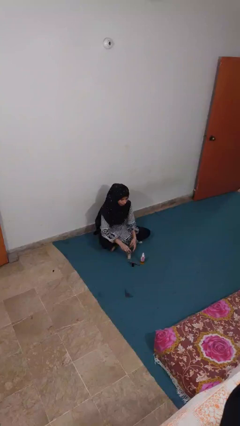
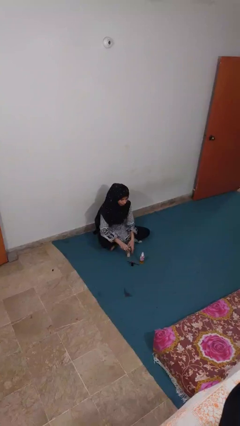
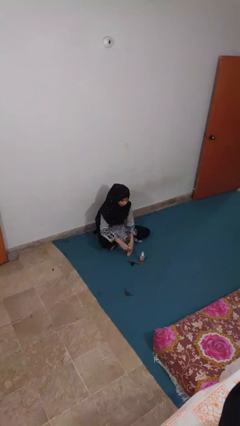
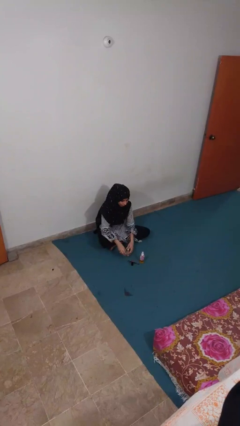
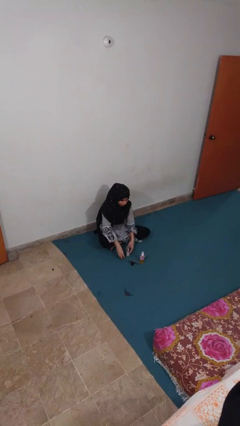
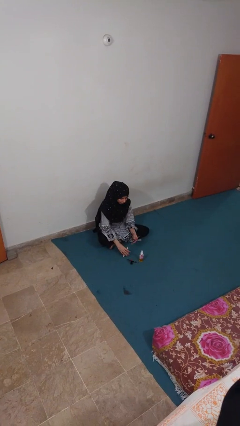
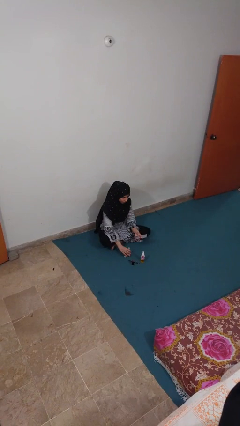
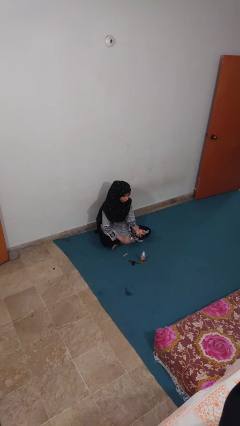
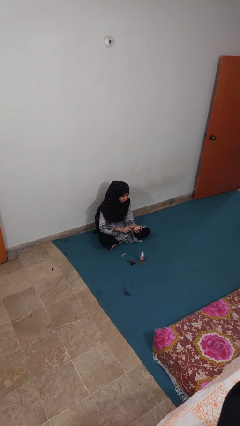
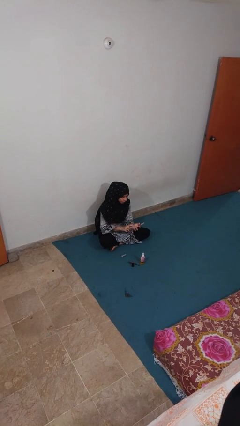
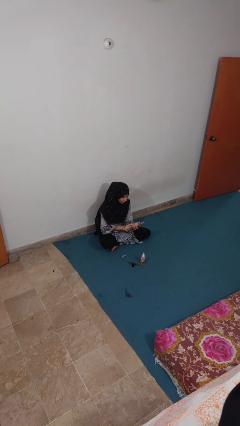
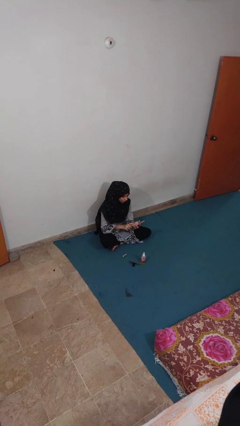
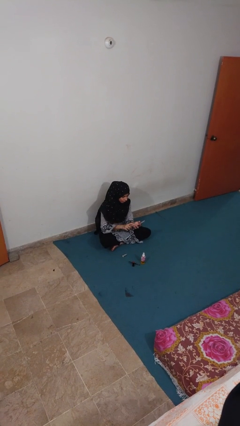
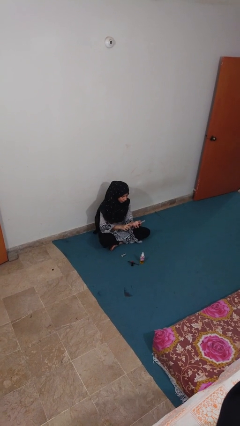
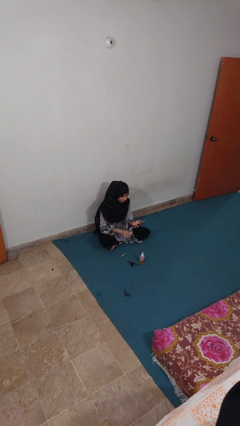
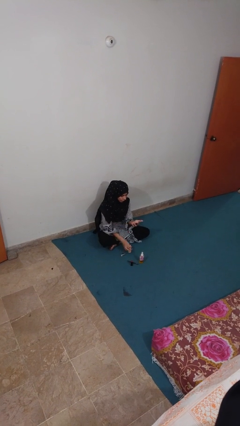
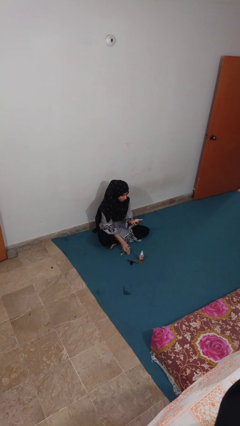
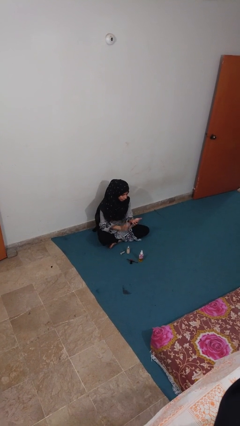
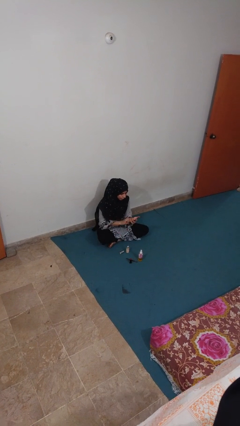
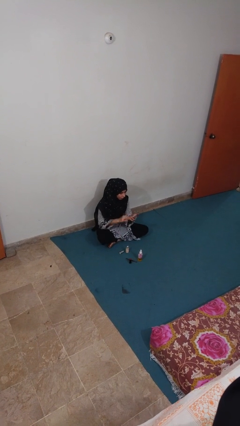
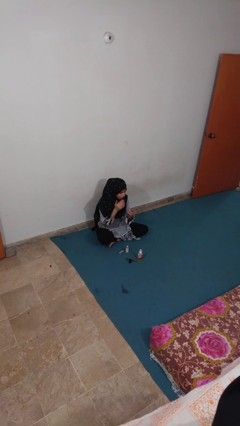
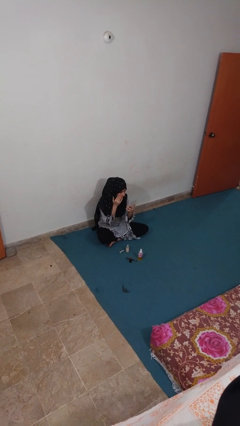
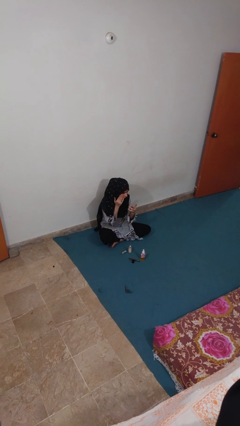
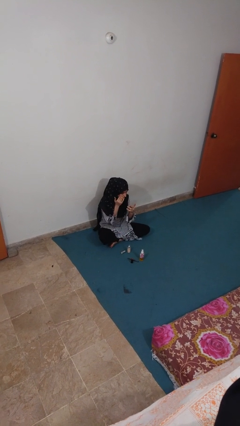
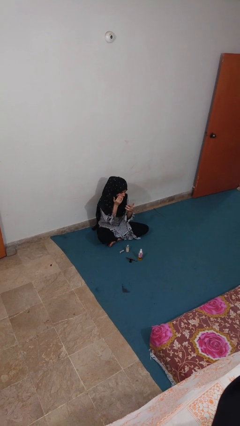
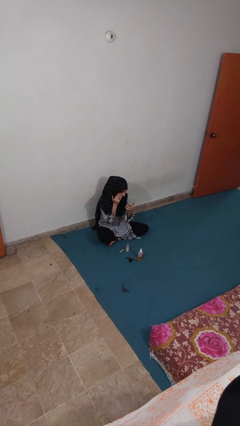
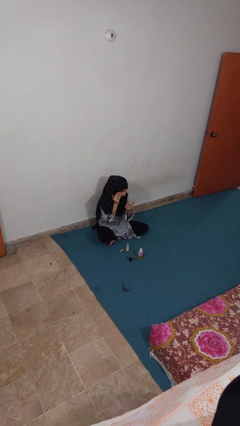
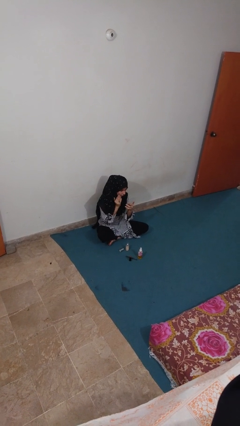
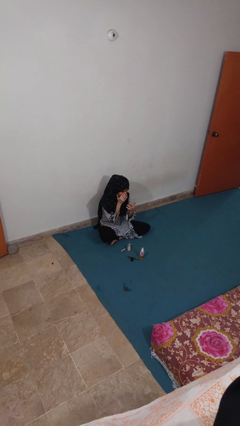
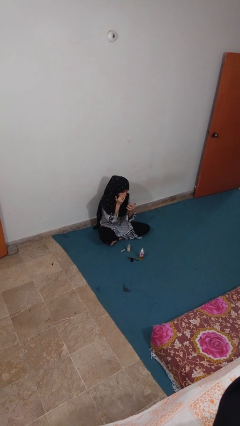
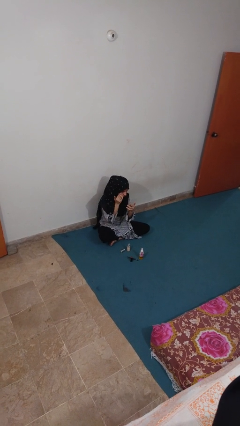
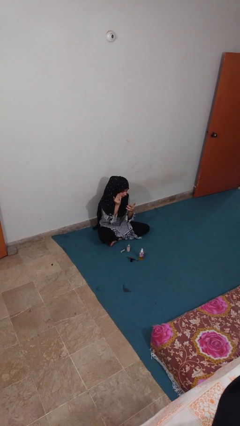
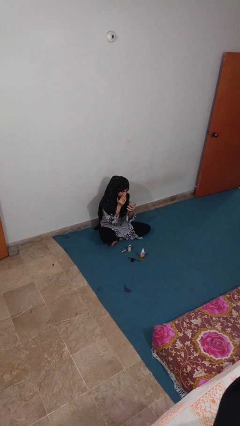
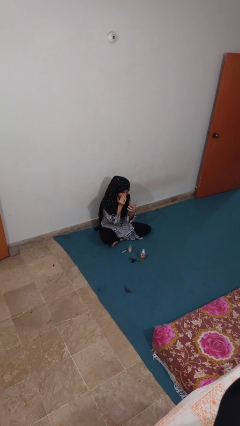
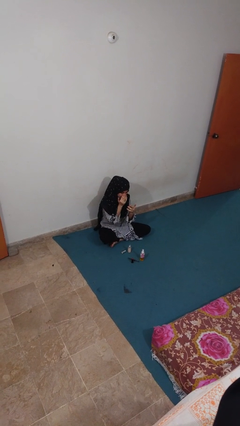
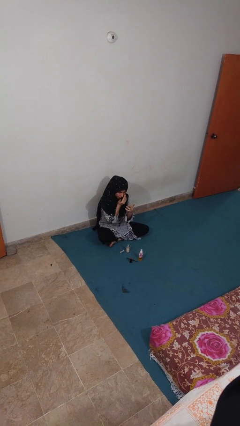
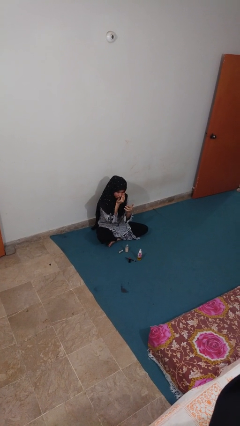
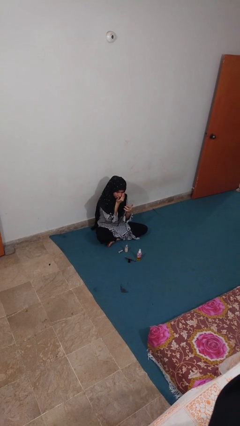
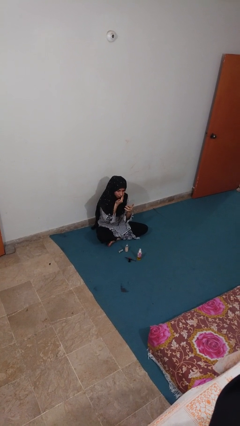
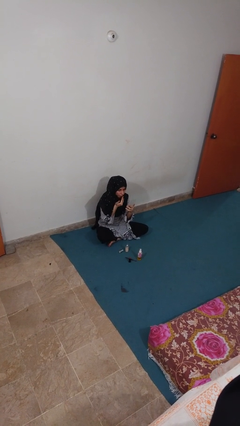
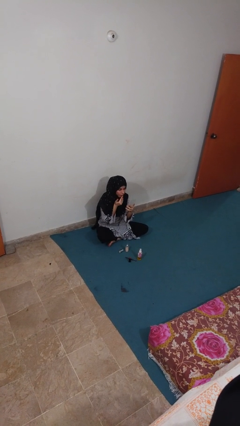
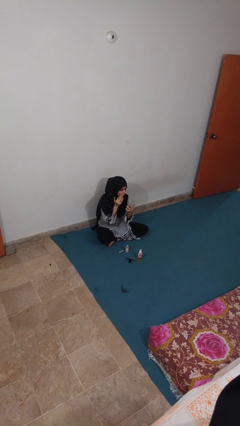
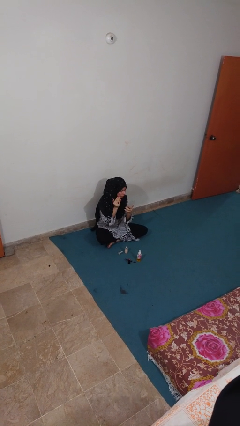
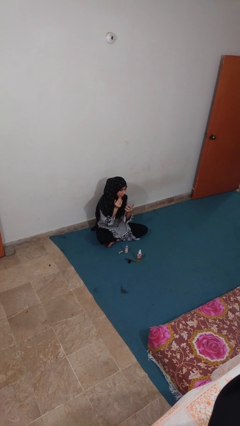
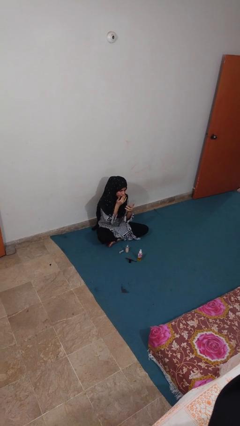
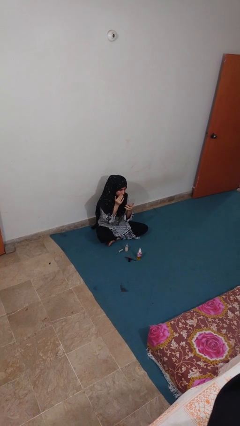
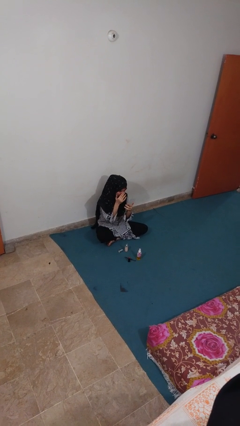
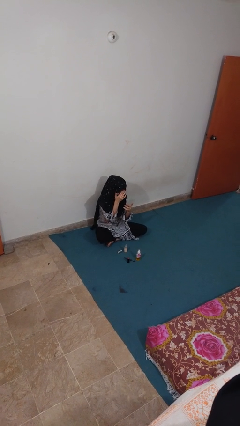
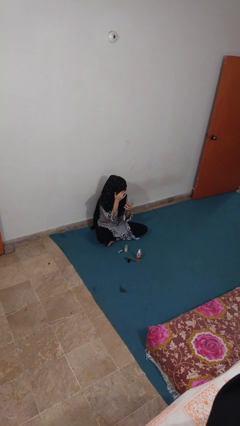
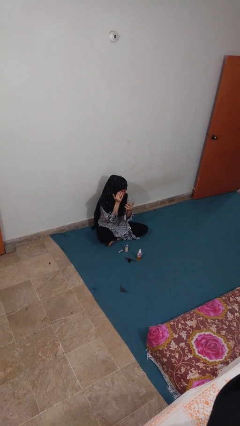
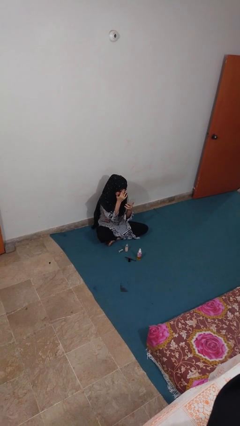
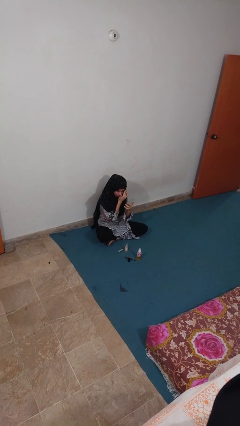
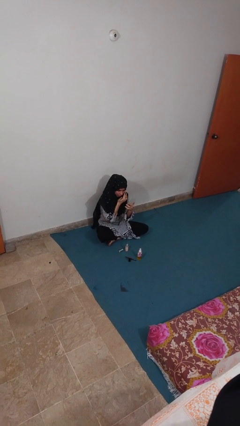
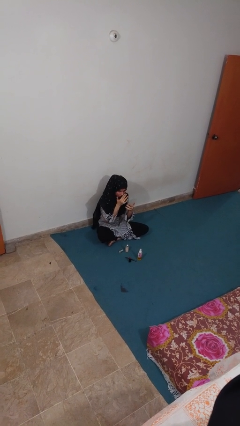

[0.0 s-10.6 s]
person applies foundation makeup

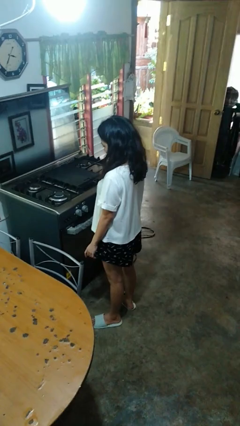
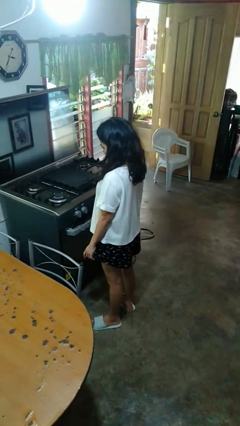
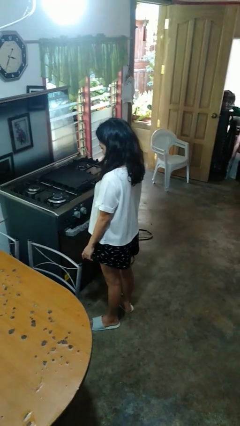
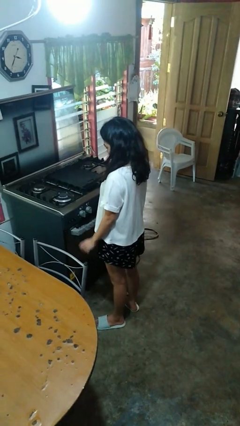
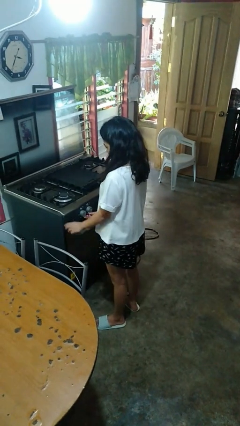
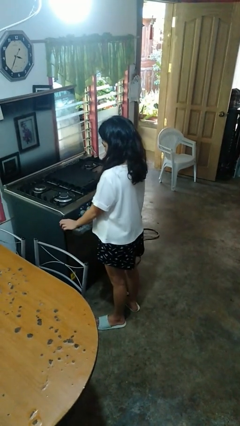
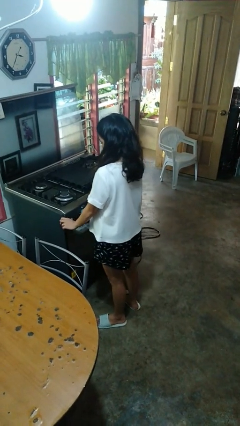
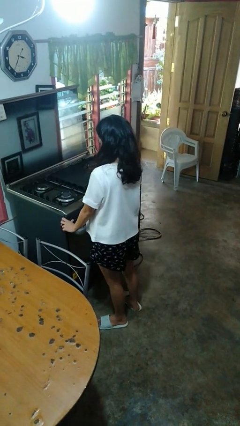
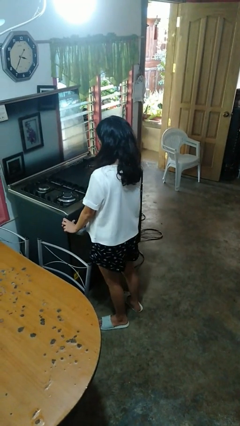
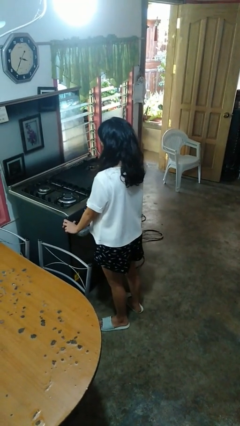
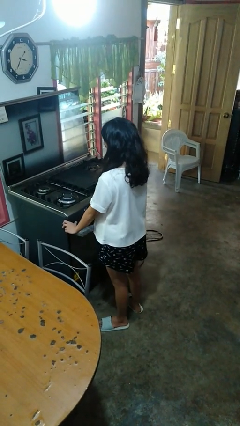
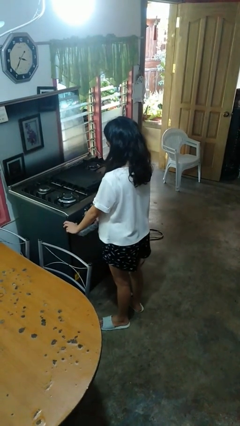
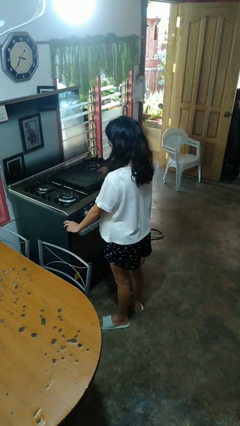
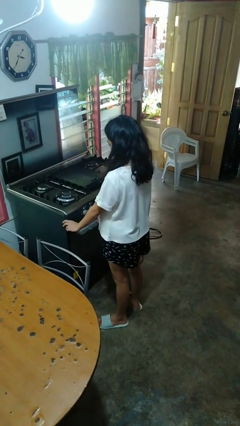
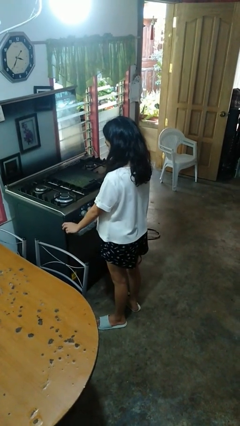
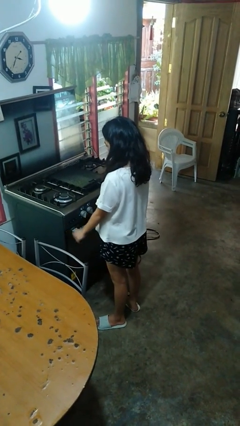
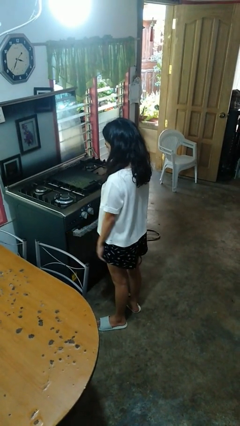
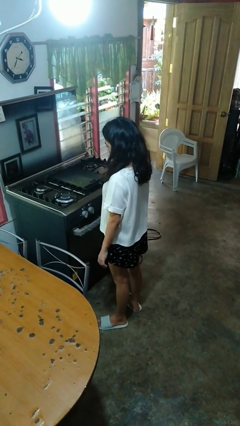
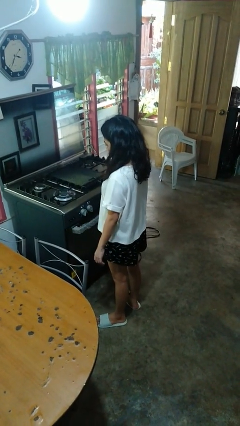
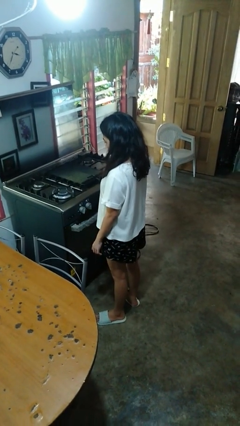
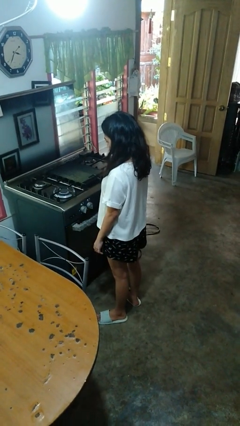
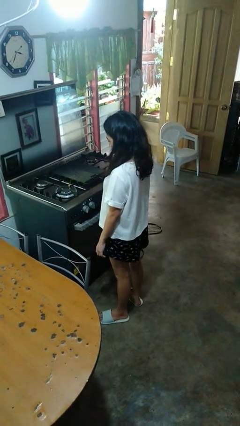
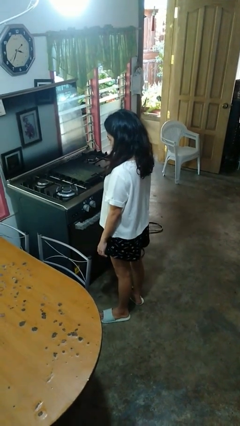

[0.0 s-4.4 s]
person turns on stovetop

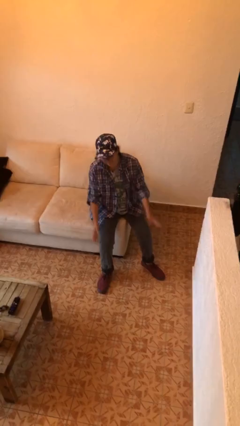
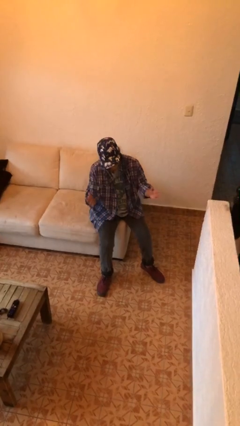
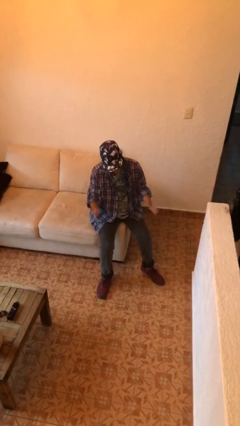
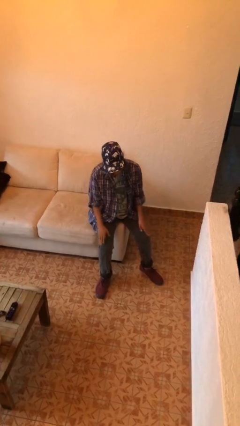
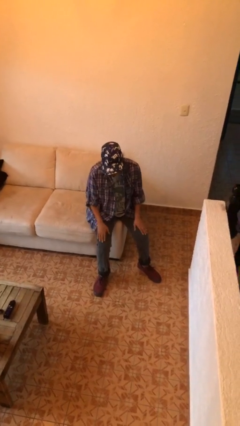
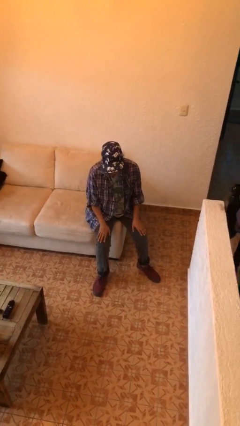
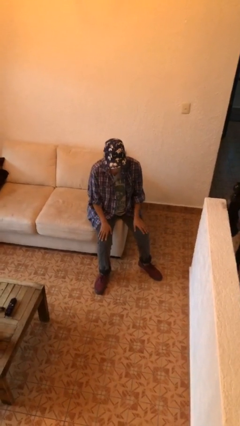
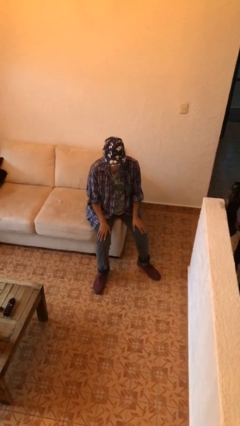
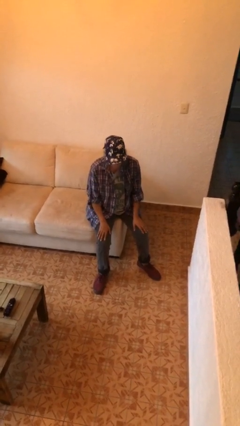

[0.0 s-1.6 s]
person slaps hands on thighs

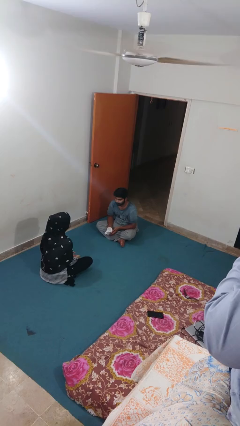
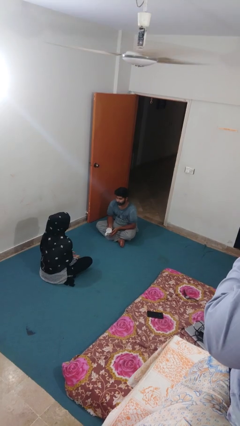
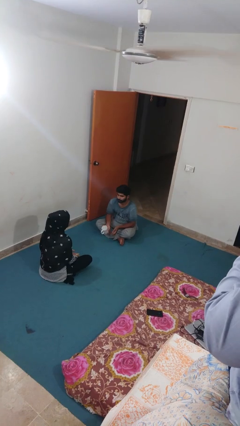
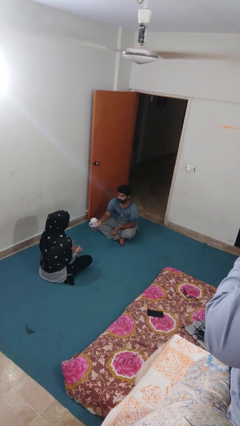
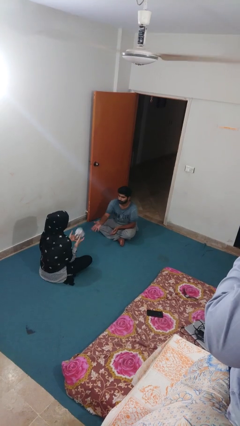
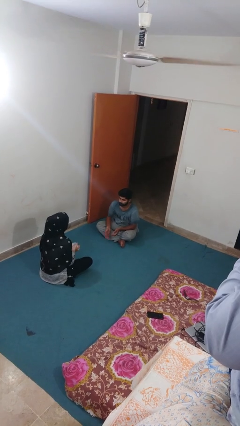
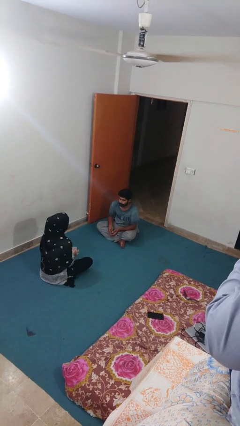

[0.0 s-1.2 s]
person throws object to person
